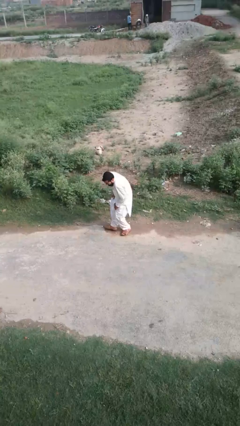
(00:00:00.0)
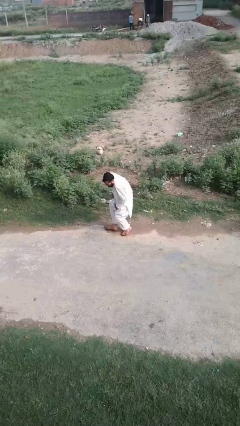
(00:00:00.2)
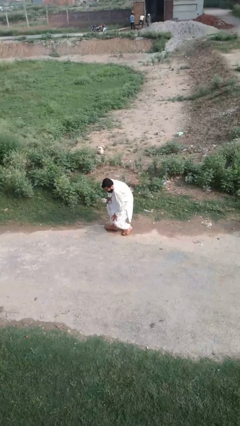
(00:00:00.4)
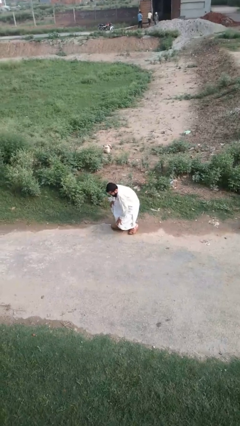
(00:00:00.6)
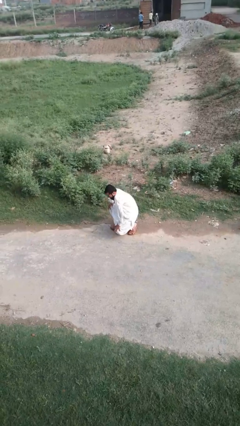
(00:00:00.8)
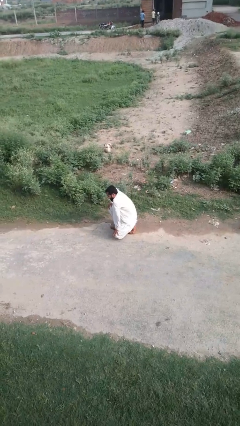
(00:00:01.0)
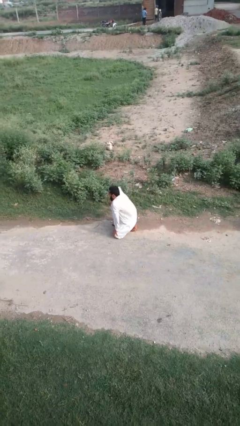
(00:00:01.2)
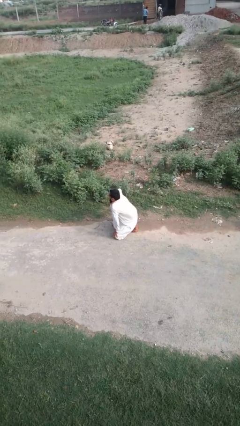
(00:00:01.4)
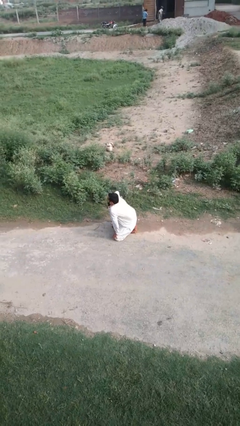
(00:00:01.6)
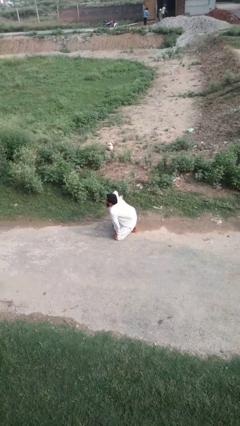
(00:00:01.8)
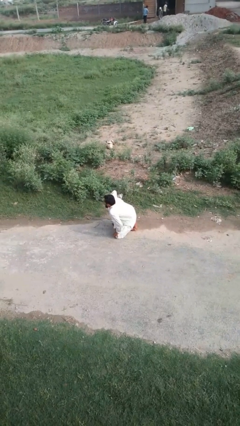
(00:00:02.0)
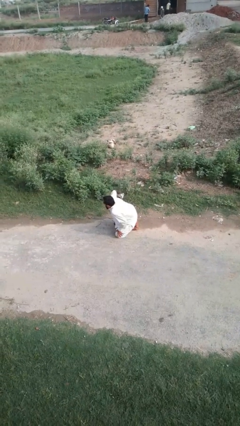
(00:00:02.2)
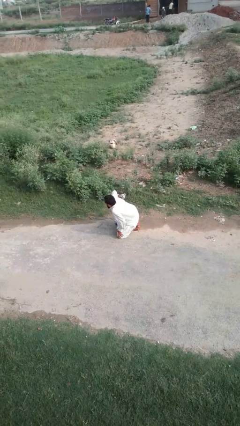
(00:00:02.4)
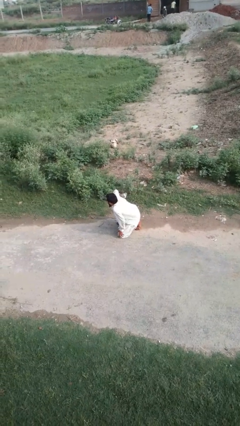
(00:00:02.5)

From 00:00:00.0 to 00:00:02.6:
person lies down on floor

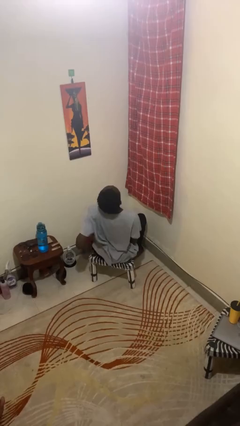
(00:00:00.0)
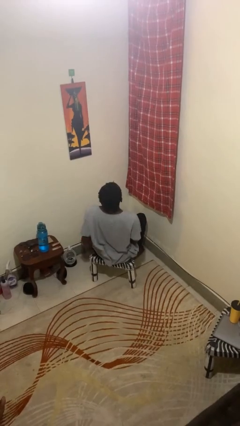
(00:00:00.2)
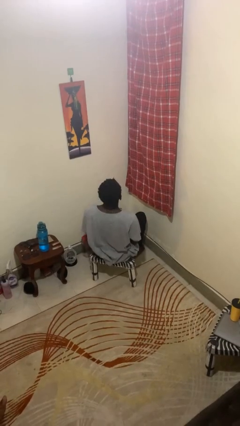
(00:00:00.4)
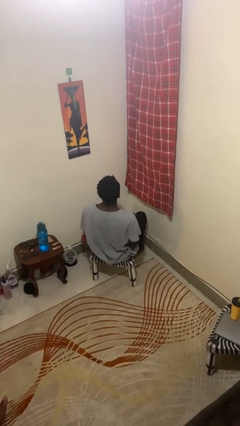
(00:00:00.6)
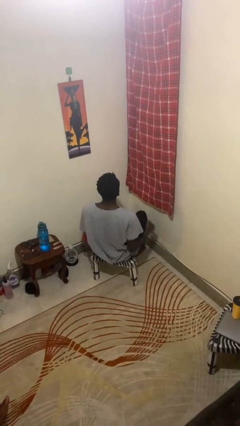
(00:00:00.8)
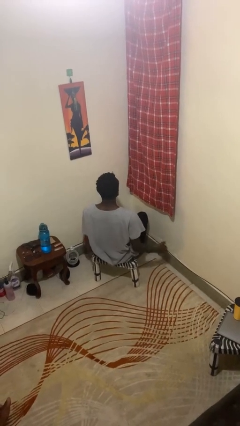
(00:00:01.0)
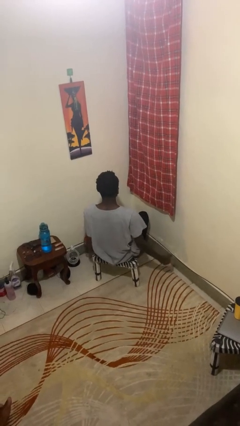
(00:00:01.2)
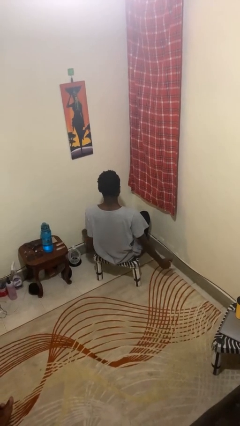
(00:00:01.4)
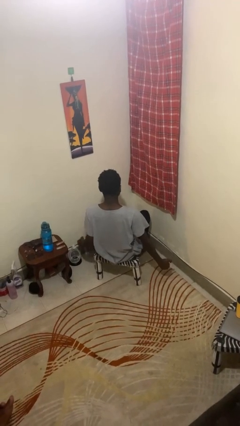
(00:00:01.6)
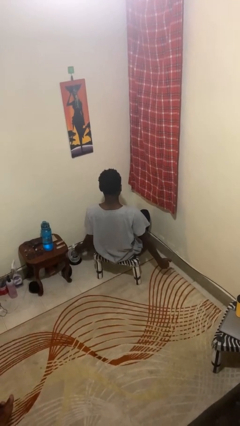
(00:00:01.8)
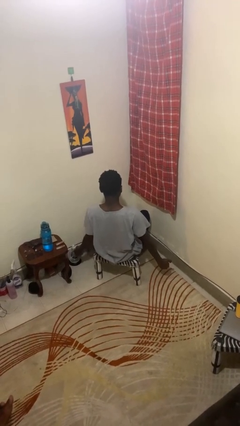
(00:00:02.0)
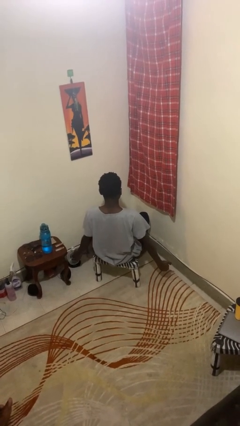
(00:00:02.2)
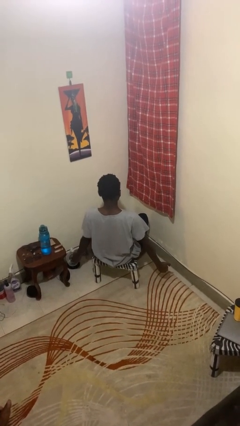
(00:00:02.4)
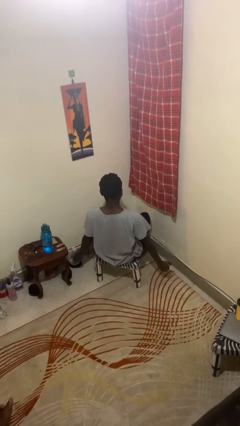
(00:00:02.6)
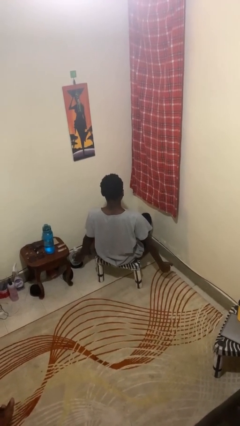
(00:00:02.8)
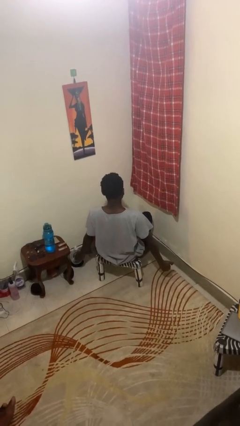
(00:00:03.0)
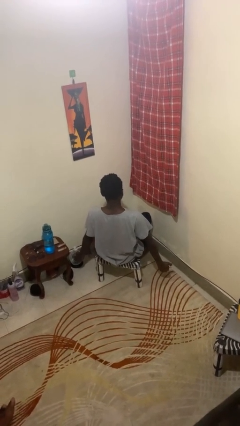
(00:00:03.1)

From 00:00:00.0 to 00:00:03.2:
person stretches arms to side

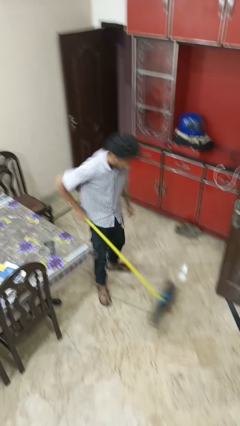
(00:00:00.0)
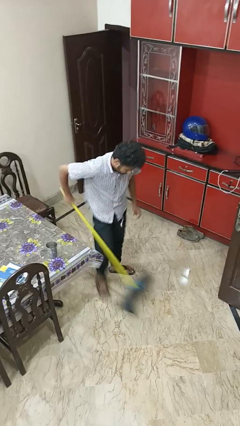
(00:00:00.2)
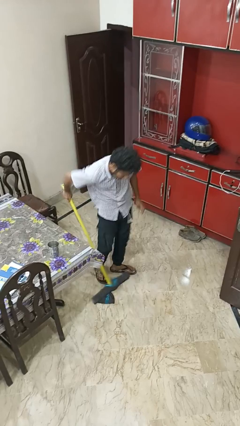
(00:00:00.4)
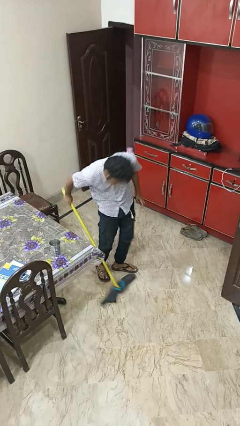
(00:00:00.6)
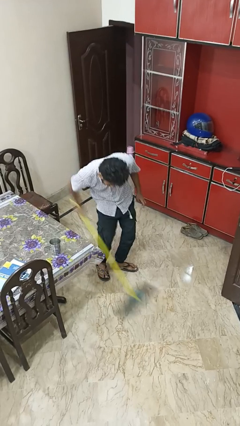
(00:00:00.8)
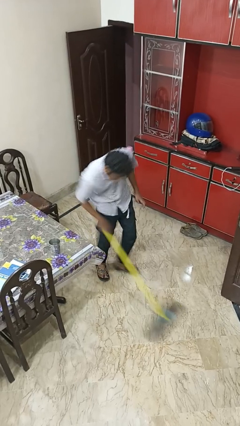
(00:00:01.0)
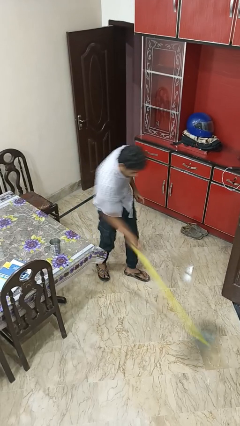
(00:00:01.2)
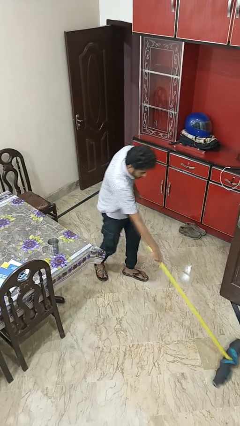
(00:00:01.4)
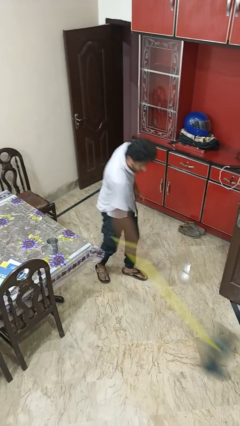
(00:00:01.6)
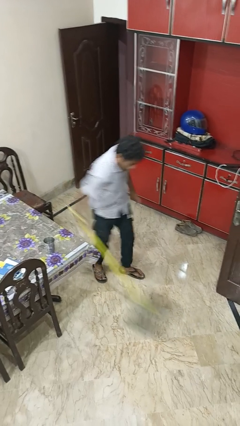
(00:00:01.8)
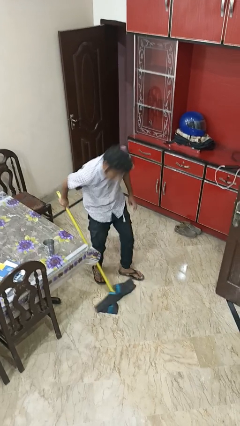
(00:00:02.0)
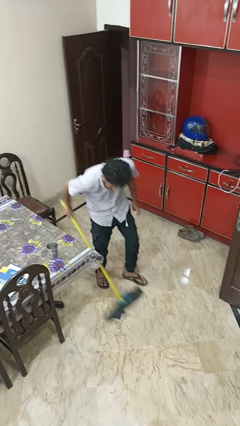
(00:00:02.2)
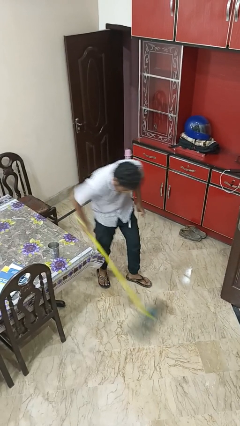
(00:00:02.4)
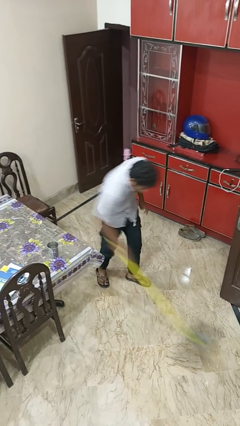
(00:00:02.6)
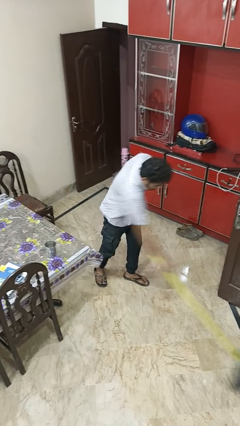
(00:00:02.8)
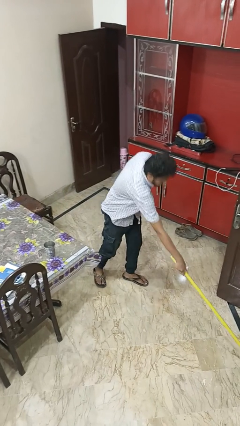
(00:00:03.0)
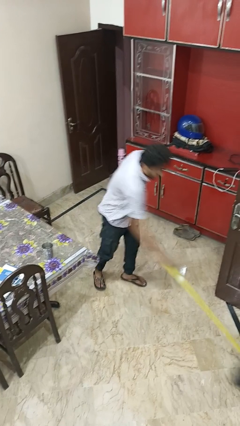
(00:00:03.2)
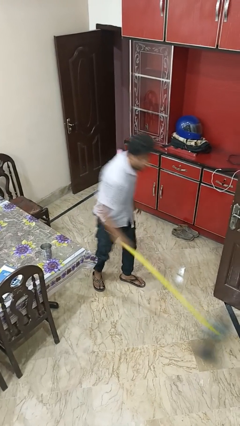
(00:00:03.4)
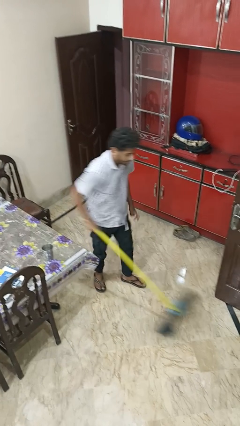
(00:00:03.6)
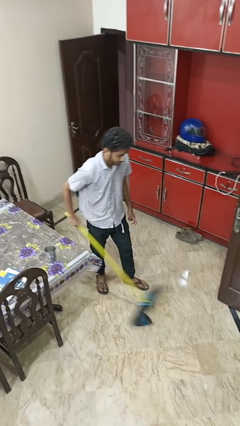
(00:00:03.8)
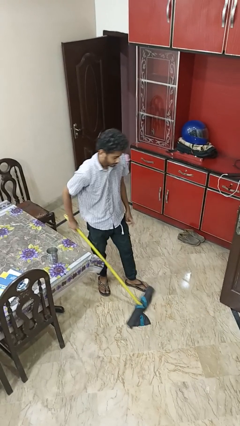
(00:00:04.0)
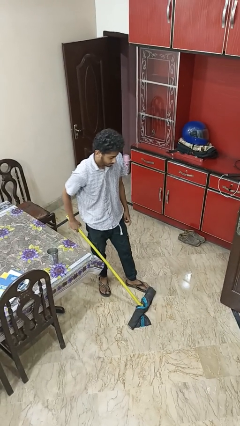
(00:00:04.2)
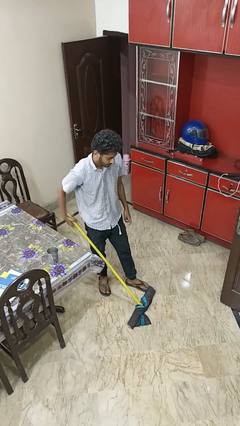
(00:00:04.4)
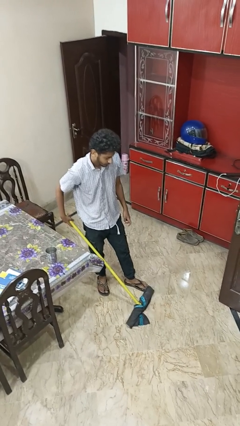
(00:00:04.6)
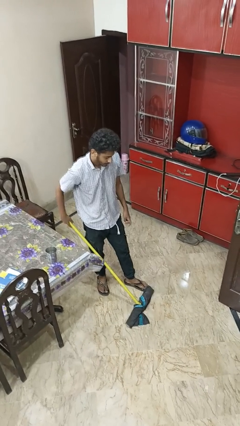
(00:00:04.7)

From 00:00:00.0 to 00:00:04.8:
person mops

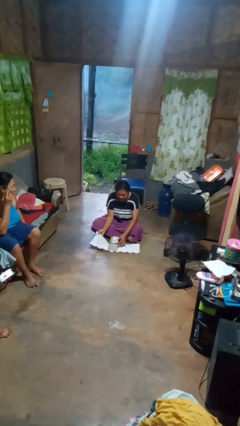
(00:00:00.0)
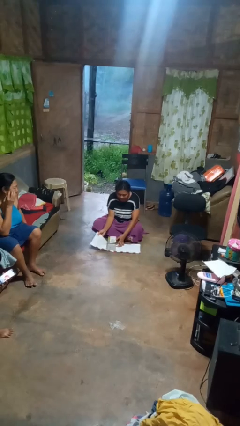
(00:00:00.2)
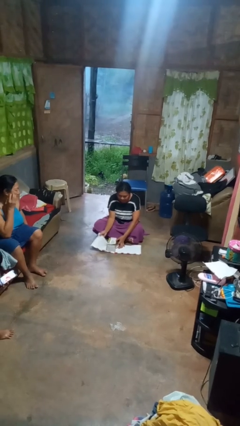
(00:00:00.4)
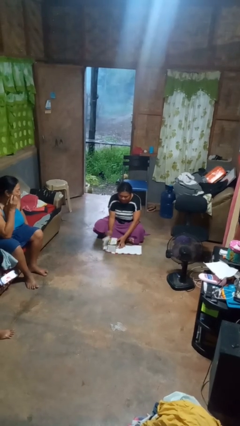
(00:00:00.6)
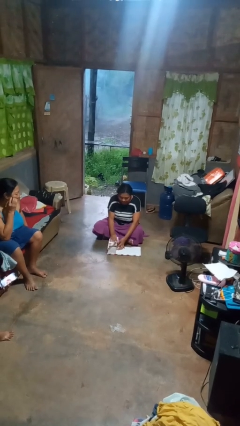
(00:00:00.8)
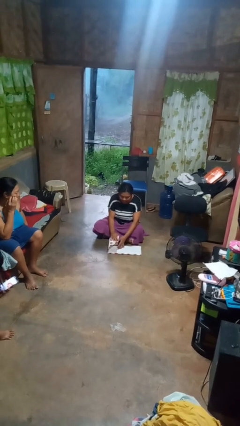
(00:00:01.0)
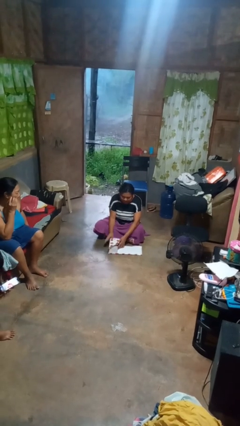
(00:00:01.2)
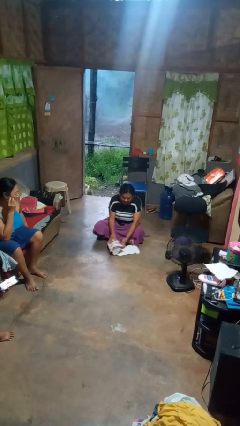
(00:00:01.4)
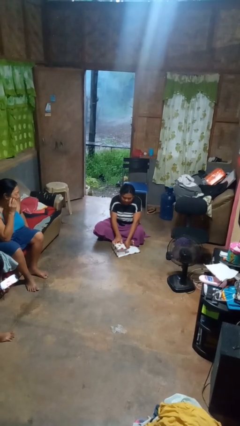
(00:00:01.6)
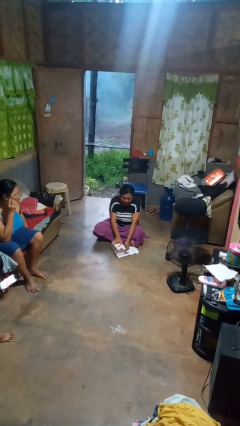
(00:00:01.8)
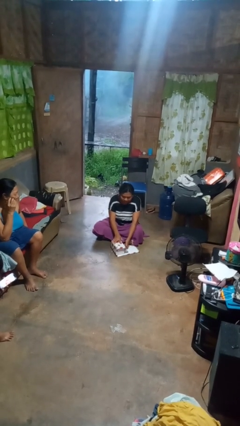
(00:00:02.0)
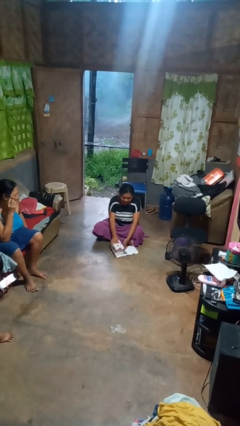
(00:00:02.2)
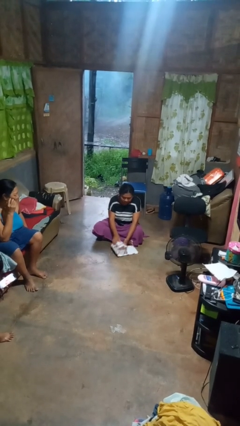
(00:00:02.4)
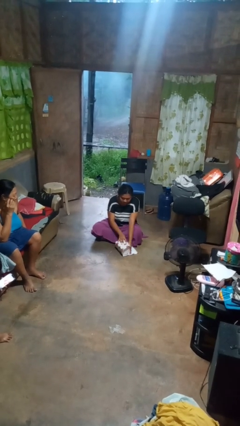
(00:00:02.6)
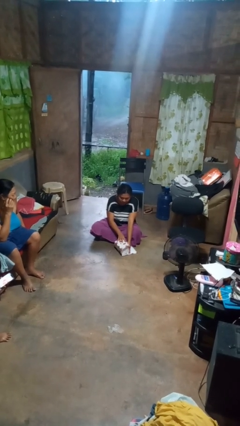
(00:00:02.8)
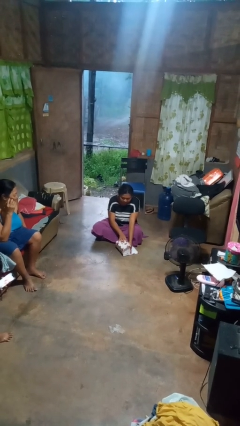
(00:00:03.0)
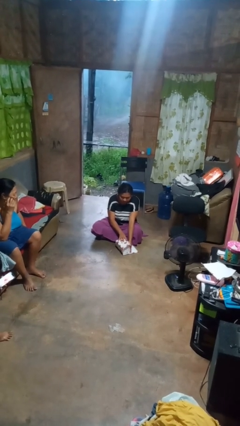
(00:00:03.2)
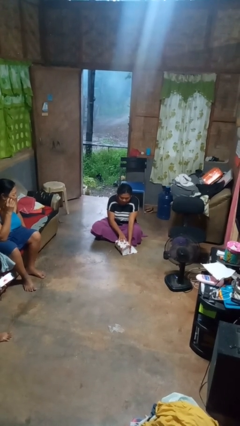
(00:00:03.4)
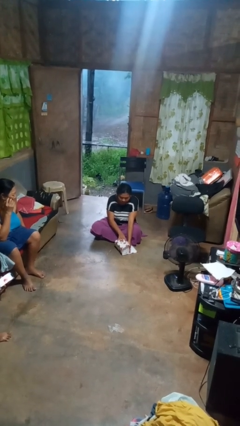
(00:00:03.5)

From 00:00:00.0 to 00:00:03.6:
person wraps box

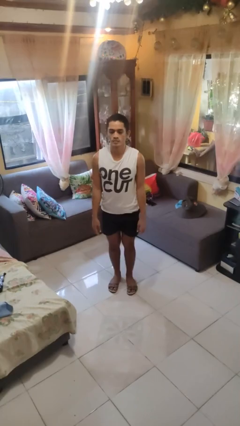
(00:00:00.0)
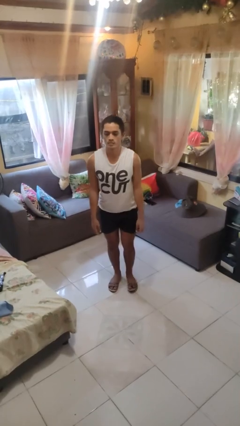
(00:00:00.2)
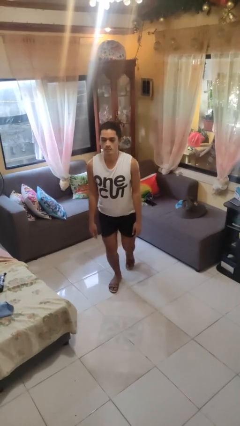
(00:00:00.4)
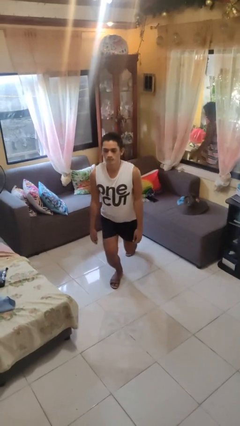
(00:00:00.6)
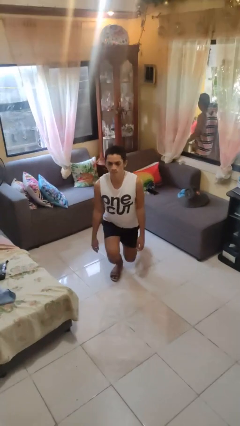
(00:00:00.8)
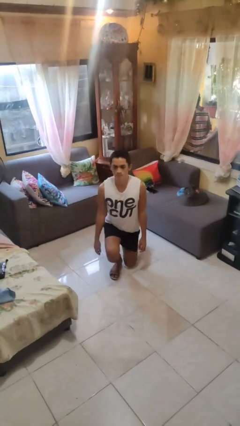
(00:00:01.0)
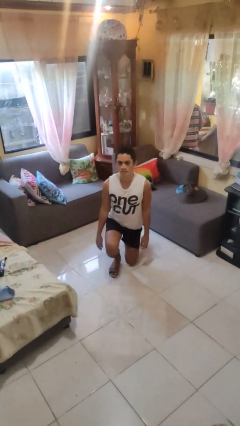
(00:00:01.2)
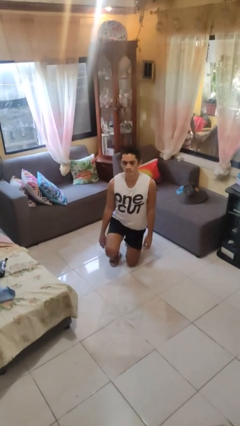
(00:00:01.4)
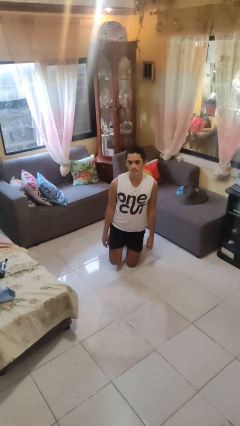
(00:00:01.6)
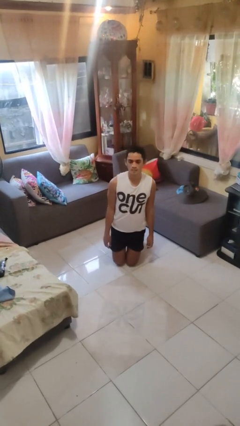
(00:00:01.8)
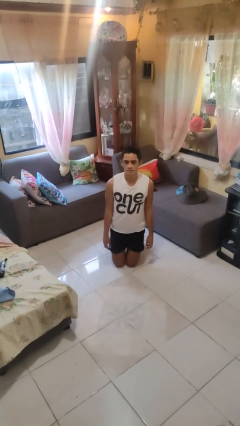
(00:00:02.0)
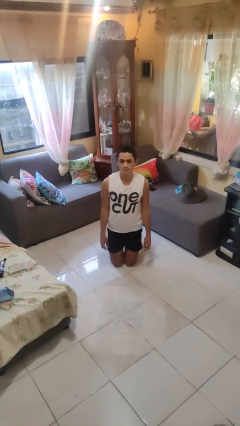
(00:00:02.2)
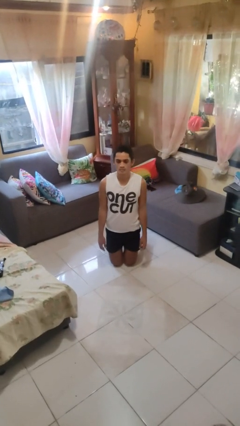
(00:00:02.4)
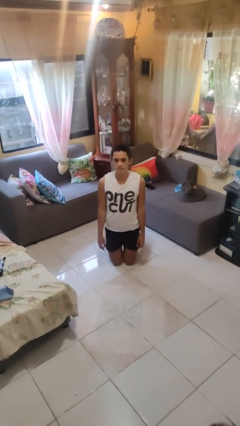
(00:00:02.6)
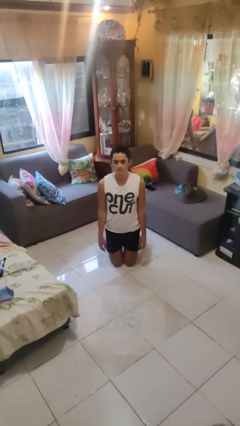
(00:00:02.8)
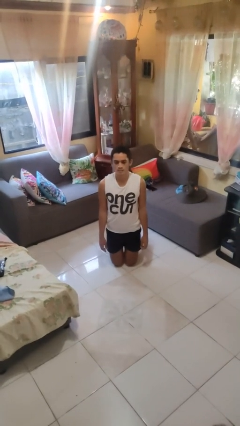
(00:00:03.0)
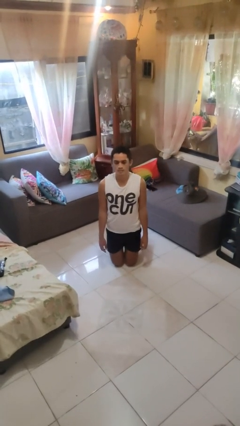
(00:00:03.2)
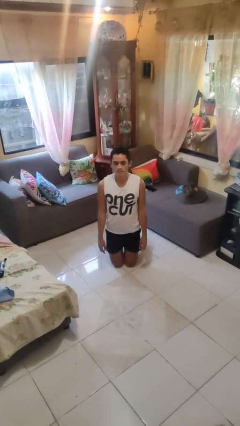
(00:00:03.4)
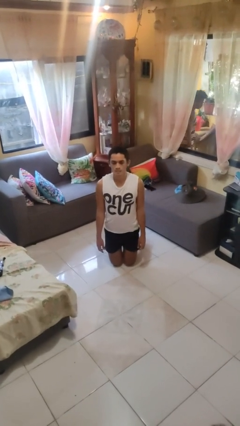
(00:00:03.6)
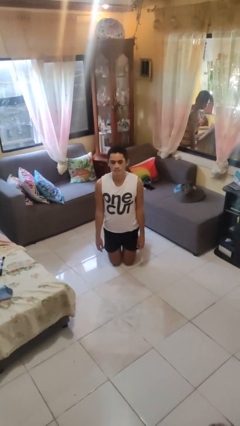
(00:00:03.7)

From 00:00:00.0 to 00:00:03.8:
person kneels
